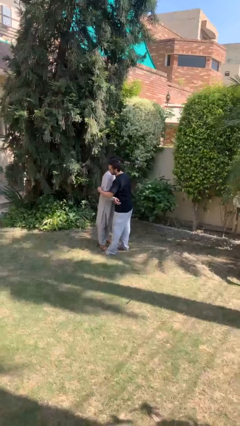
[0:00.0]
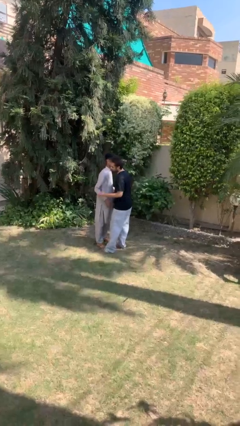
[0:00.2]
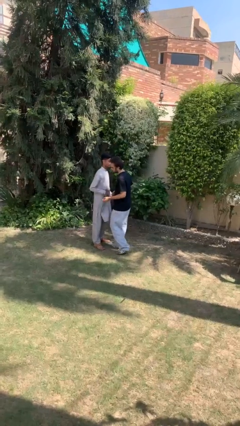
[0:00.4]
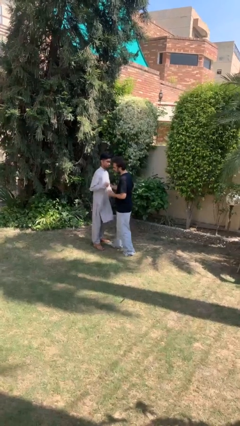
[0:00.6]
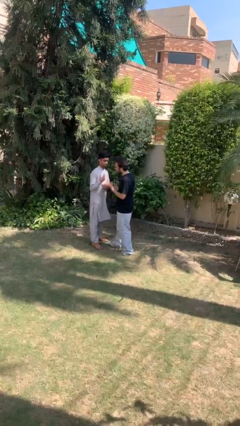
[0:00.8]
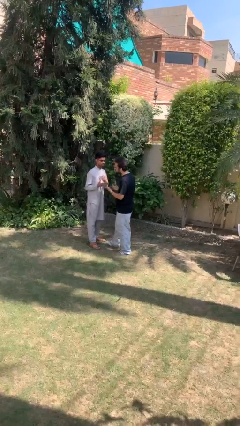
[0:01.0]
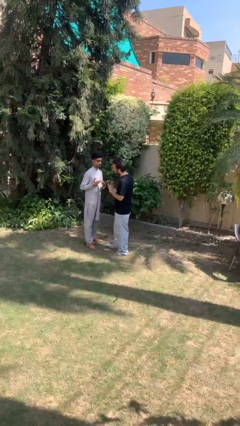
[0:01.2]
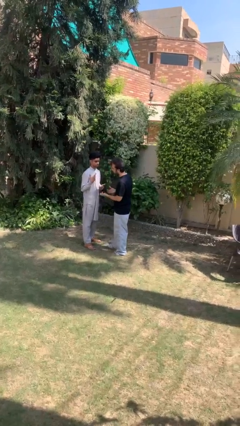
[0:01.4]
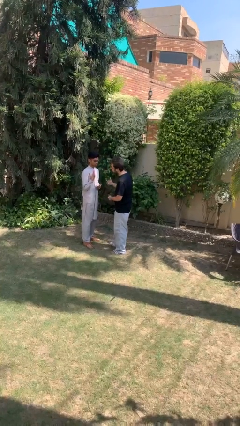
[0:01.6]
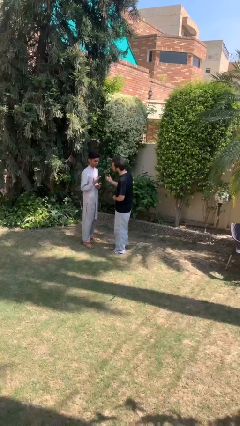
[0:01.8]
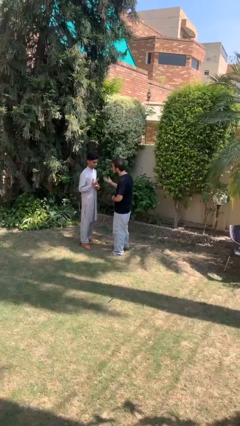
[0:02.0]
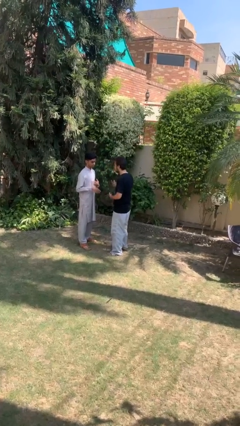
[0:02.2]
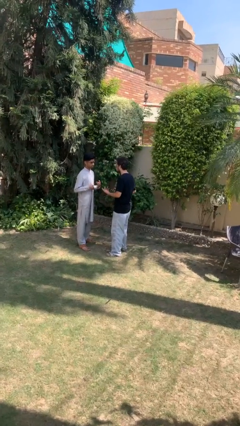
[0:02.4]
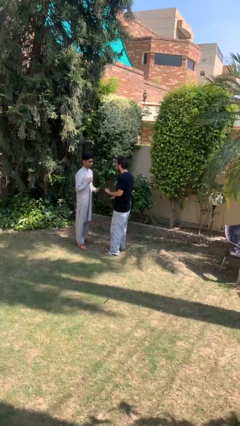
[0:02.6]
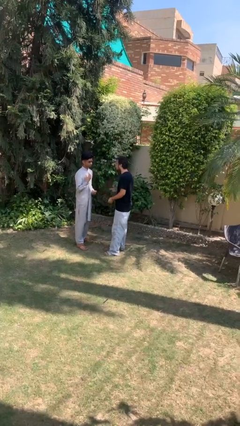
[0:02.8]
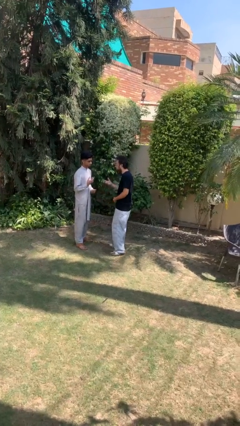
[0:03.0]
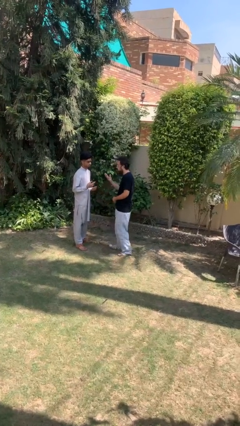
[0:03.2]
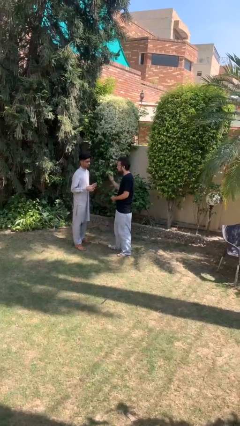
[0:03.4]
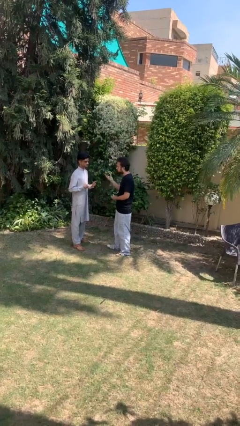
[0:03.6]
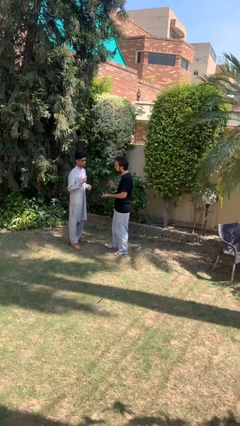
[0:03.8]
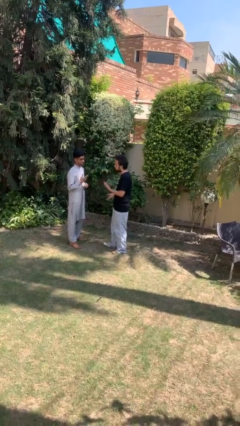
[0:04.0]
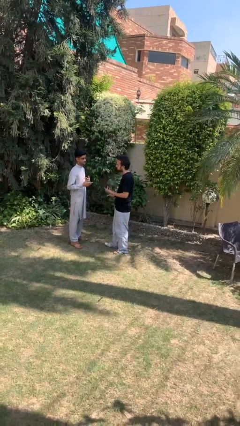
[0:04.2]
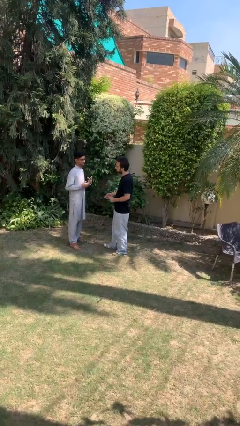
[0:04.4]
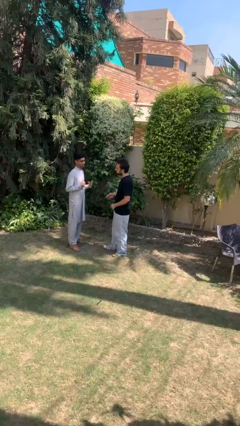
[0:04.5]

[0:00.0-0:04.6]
person talks to person

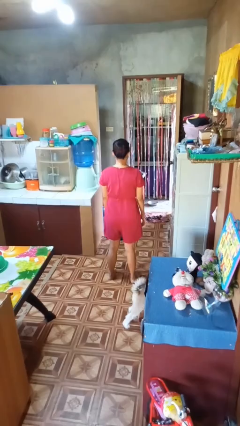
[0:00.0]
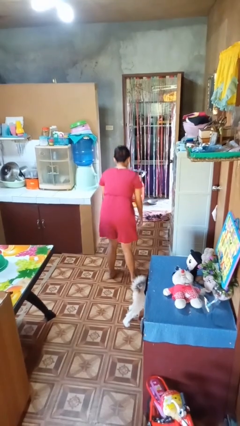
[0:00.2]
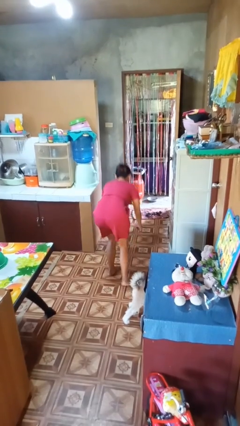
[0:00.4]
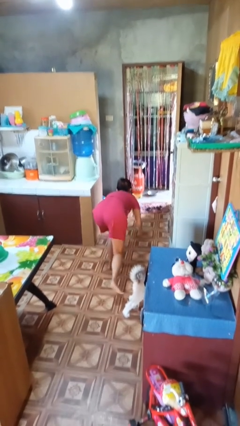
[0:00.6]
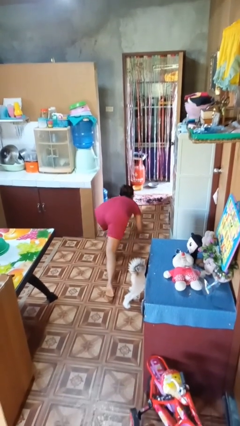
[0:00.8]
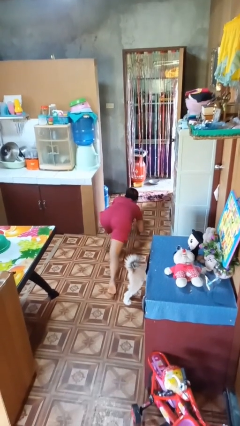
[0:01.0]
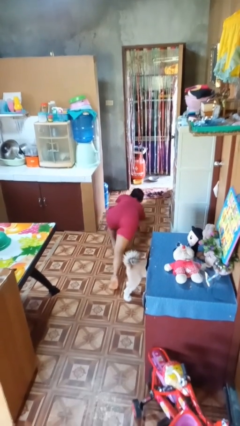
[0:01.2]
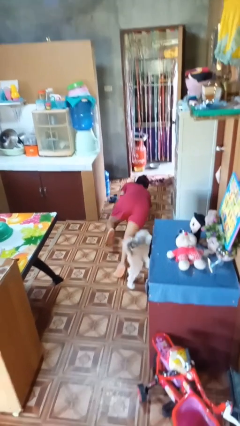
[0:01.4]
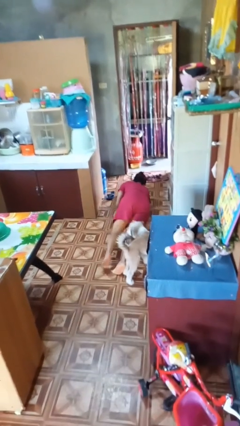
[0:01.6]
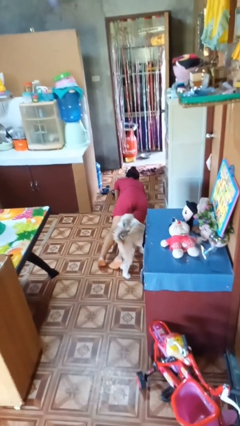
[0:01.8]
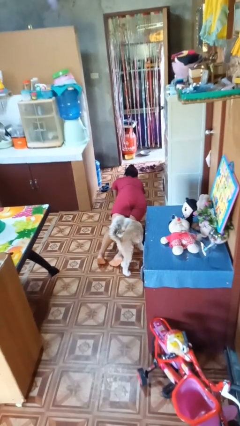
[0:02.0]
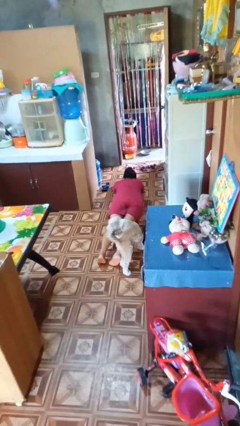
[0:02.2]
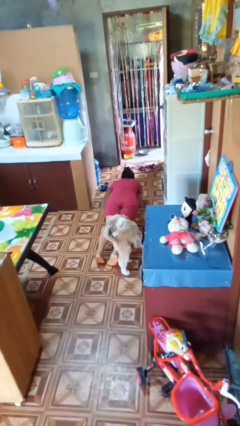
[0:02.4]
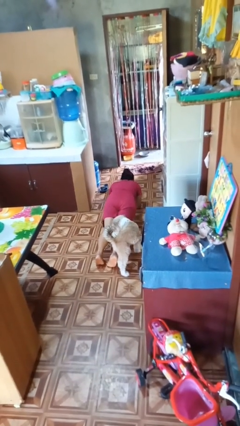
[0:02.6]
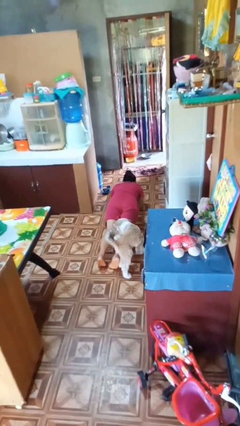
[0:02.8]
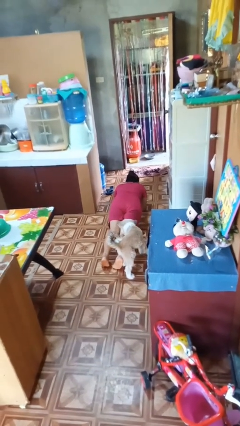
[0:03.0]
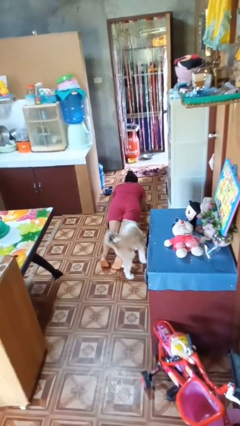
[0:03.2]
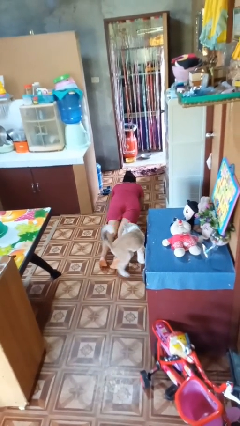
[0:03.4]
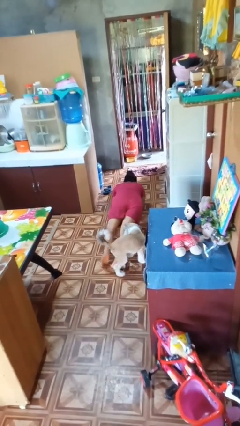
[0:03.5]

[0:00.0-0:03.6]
person exercises with plank

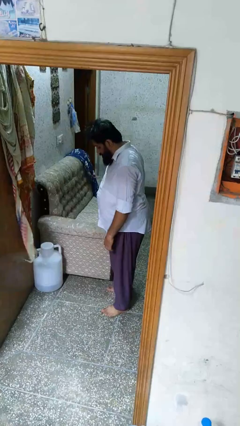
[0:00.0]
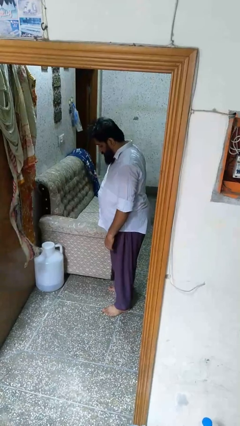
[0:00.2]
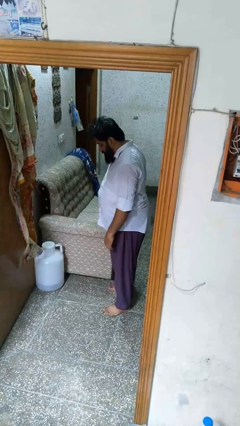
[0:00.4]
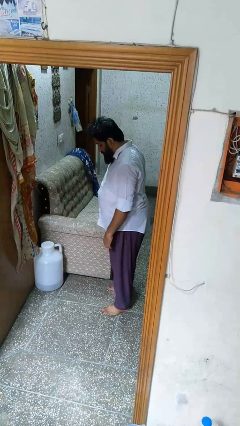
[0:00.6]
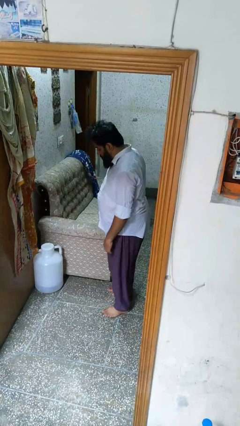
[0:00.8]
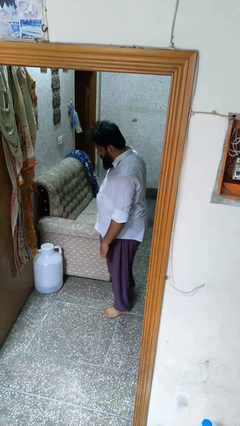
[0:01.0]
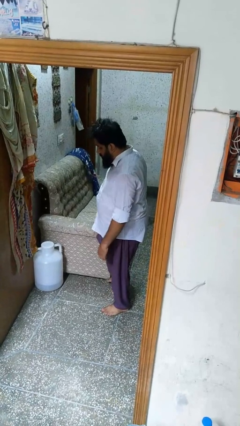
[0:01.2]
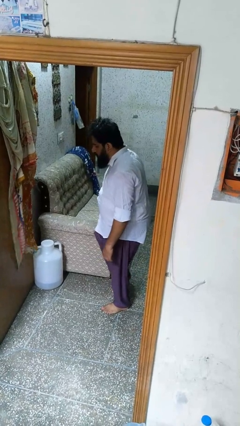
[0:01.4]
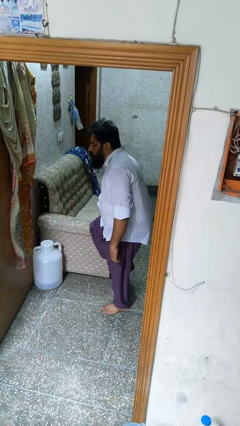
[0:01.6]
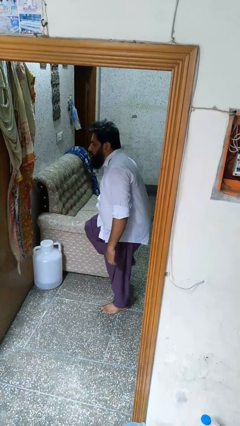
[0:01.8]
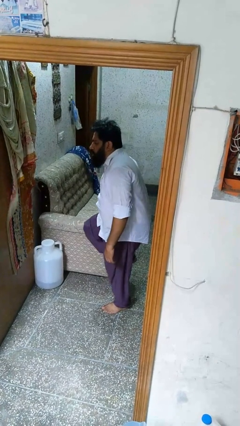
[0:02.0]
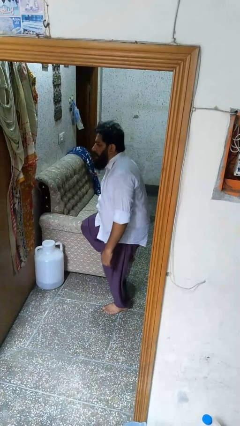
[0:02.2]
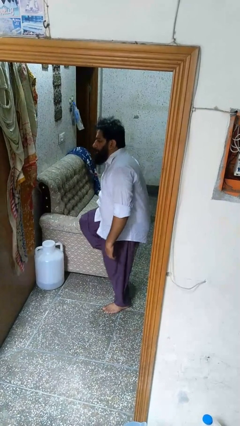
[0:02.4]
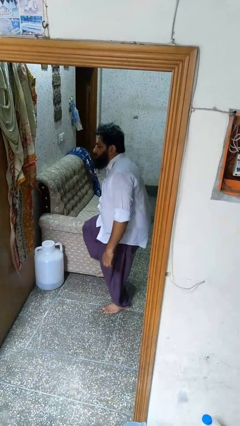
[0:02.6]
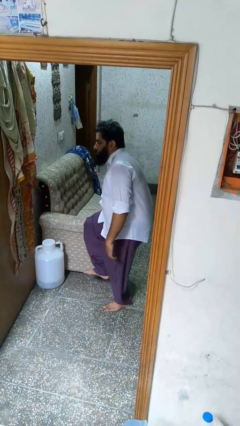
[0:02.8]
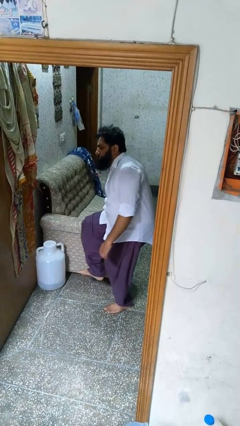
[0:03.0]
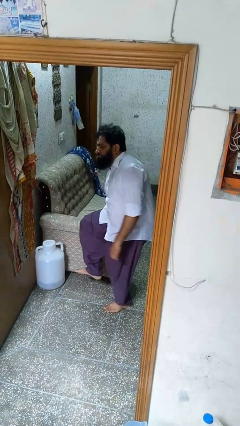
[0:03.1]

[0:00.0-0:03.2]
person stubs toe

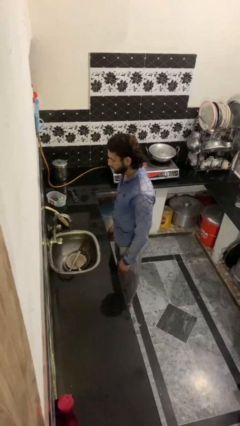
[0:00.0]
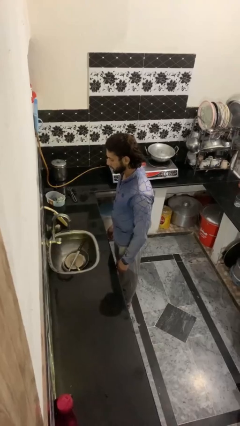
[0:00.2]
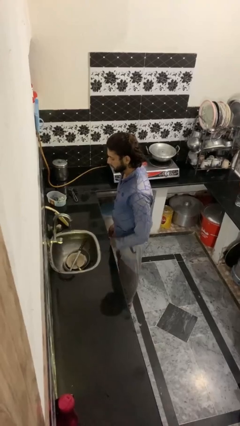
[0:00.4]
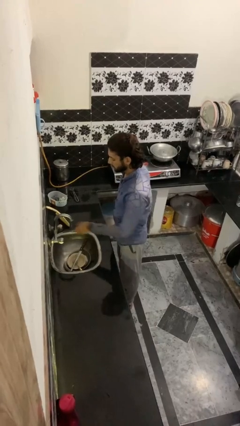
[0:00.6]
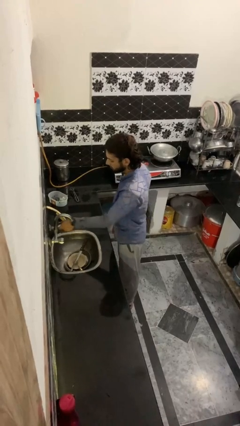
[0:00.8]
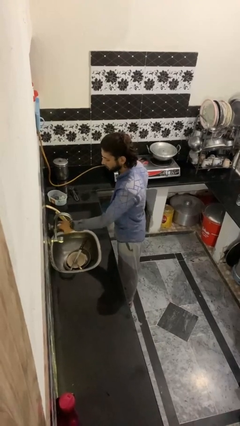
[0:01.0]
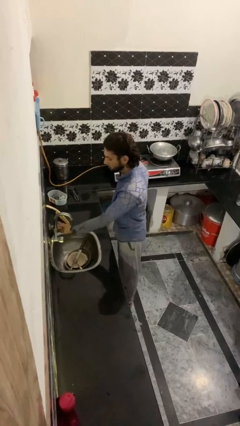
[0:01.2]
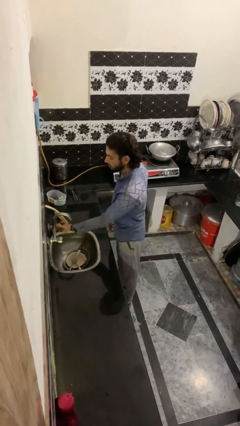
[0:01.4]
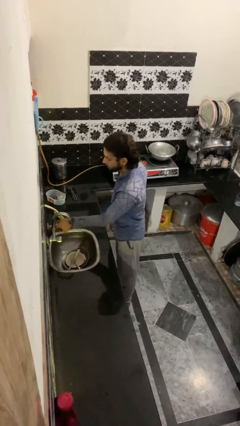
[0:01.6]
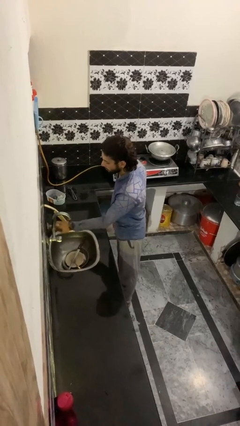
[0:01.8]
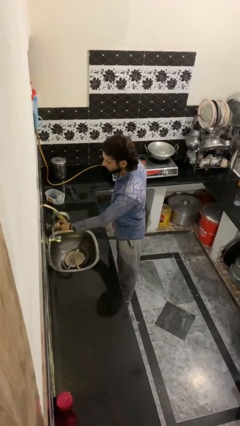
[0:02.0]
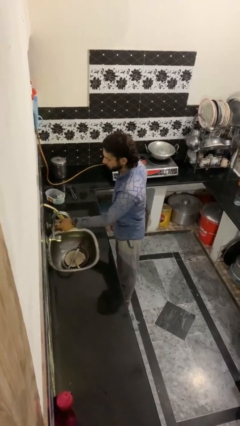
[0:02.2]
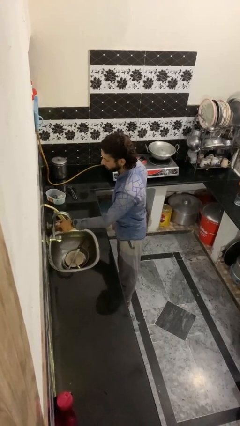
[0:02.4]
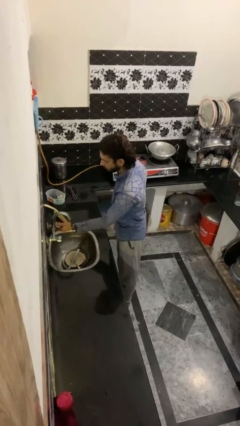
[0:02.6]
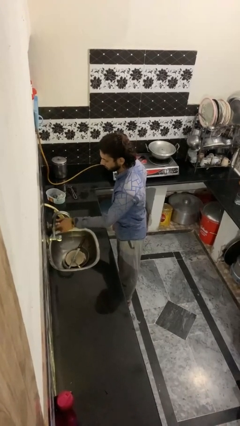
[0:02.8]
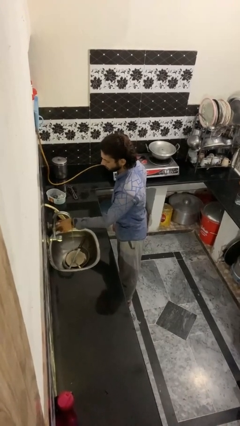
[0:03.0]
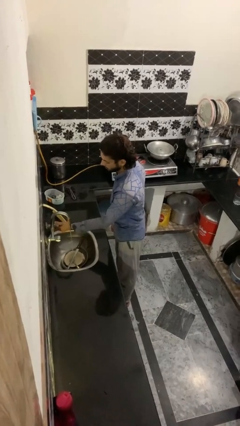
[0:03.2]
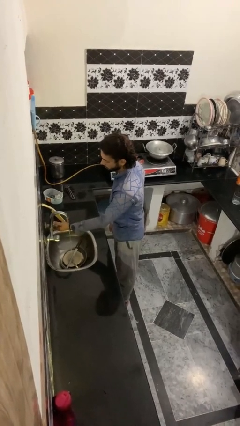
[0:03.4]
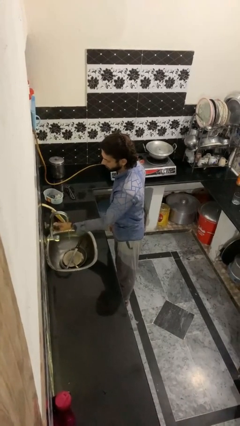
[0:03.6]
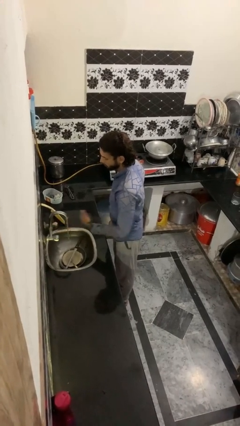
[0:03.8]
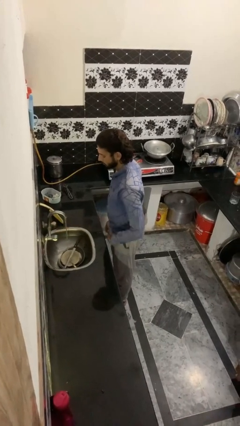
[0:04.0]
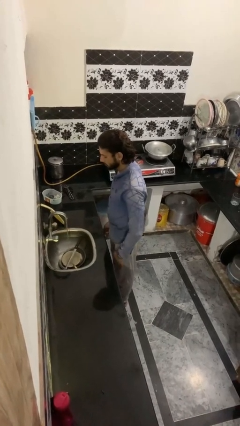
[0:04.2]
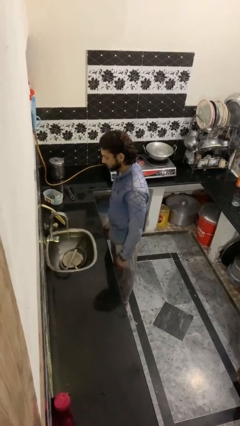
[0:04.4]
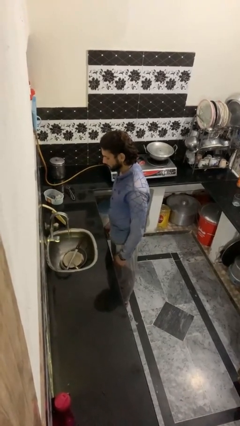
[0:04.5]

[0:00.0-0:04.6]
person turns on faucet

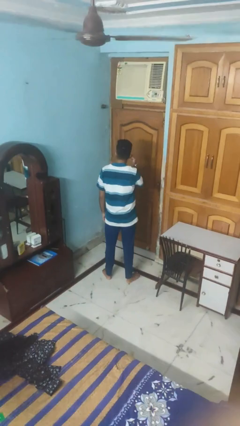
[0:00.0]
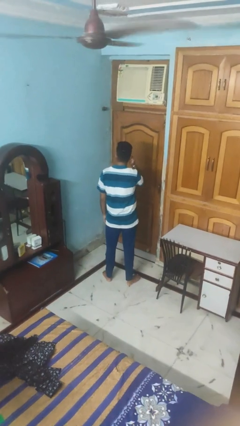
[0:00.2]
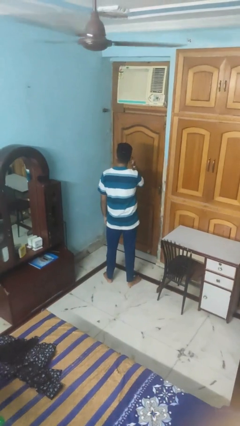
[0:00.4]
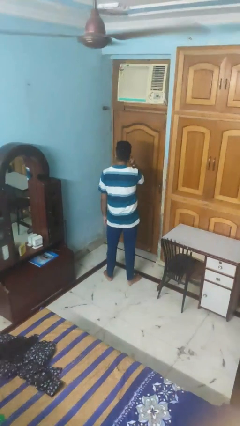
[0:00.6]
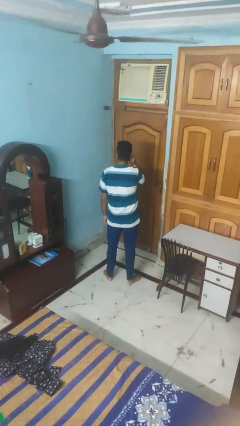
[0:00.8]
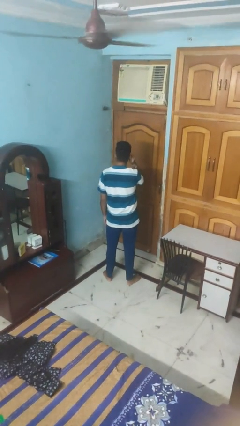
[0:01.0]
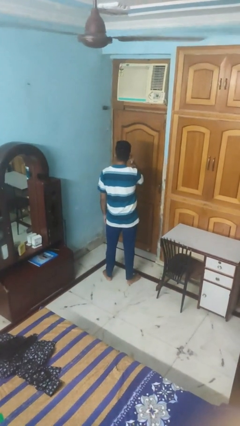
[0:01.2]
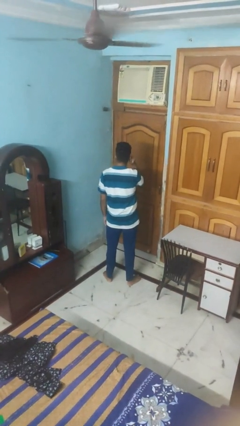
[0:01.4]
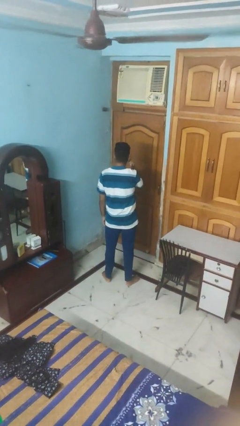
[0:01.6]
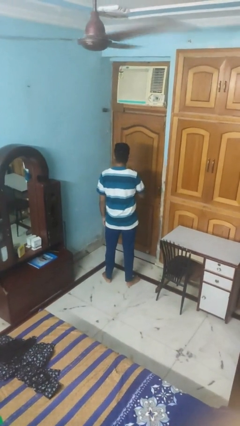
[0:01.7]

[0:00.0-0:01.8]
person touches earlobe
